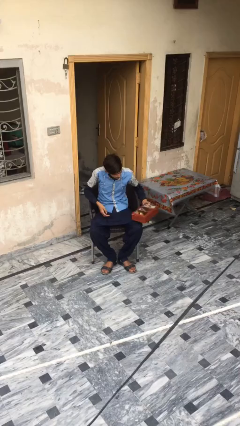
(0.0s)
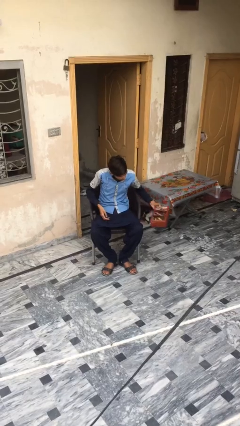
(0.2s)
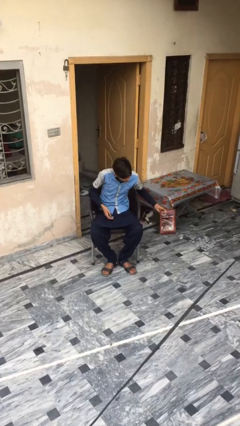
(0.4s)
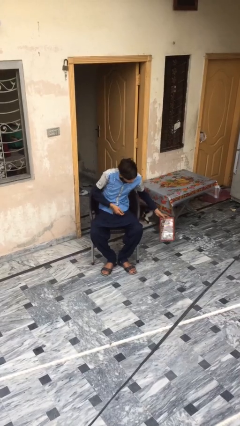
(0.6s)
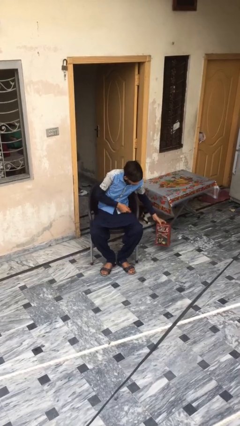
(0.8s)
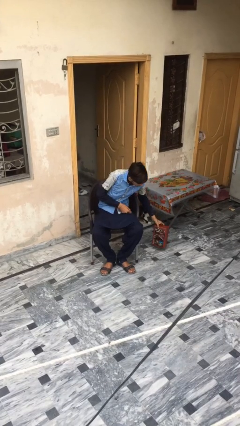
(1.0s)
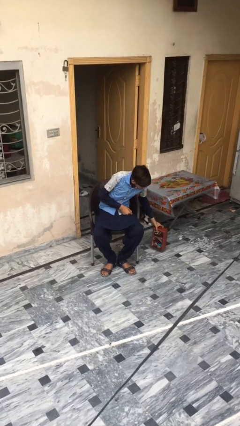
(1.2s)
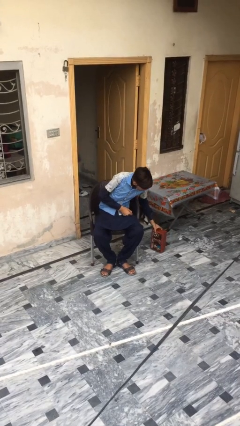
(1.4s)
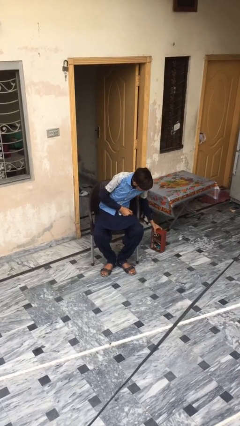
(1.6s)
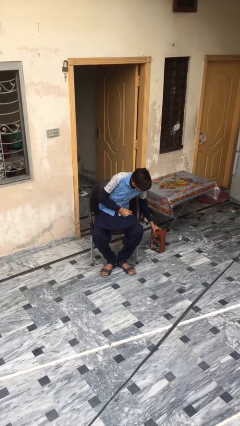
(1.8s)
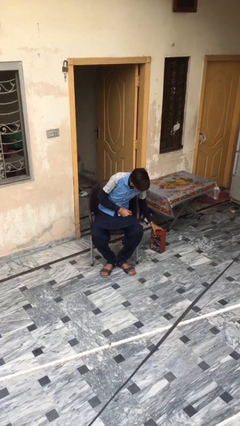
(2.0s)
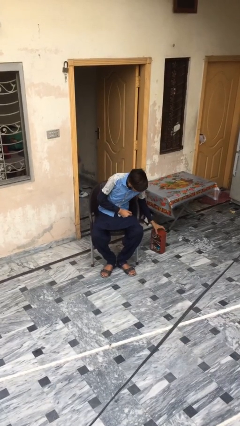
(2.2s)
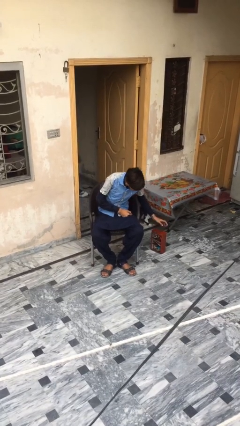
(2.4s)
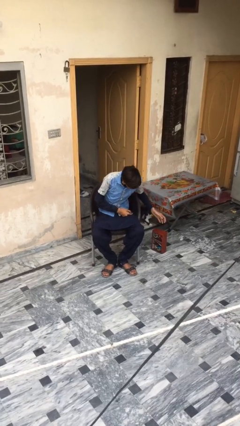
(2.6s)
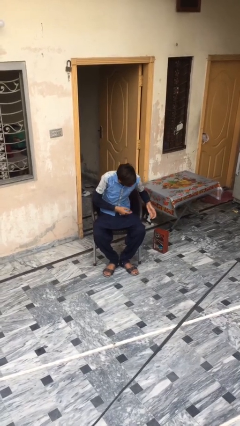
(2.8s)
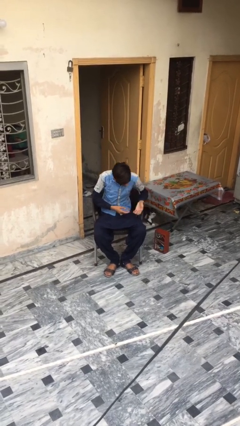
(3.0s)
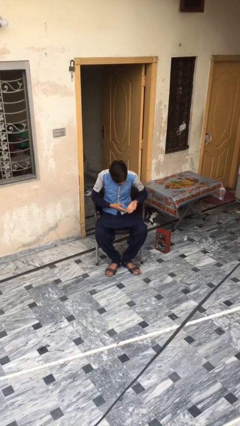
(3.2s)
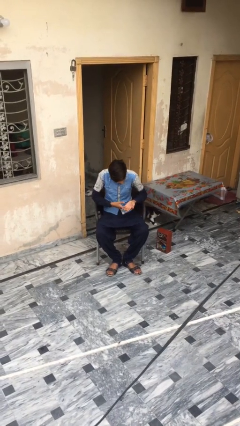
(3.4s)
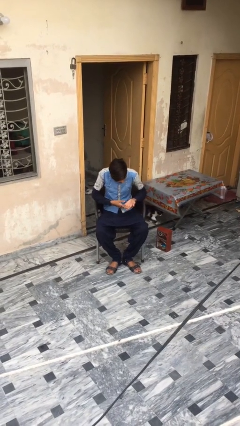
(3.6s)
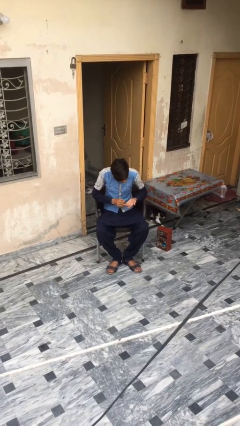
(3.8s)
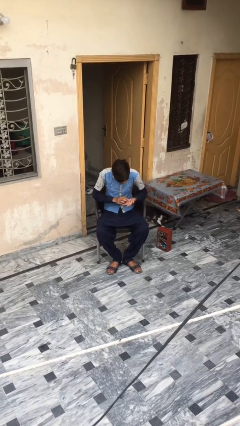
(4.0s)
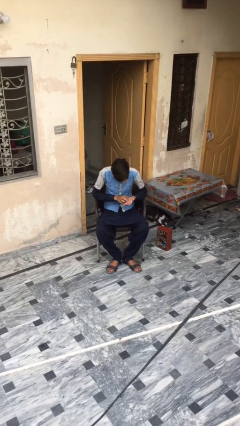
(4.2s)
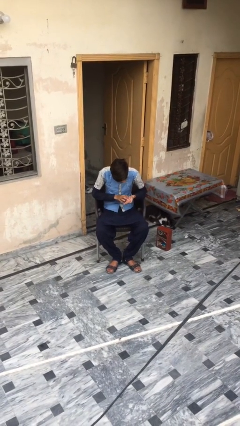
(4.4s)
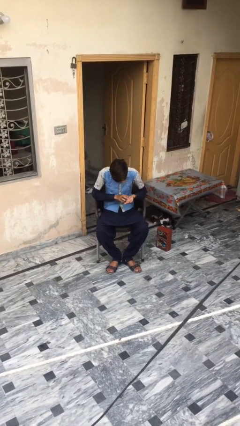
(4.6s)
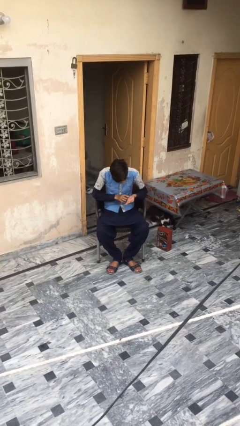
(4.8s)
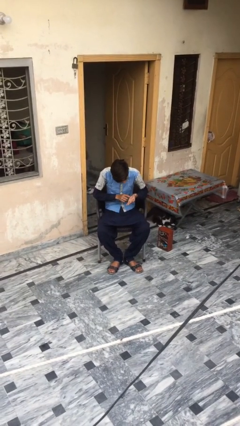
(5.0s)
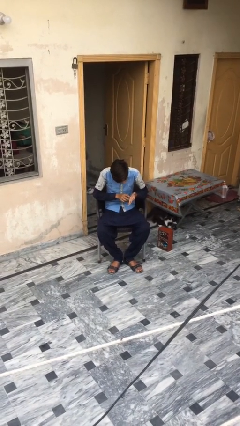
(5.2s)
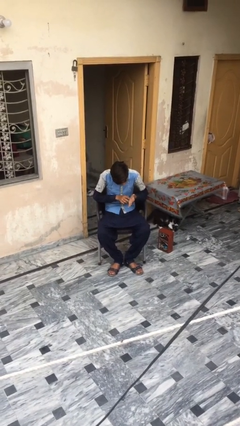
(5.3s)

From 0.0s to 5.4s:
person puts down object on floor

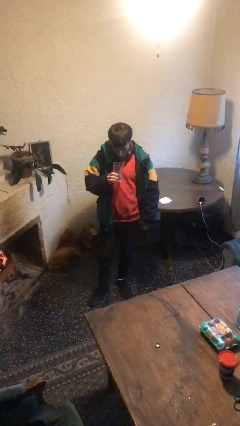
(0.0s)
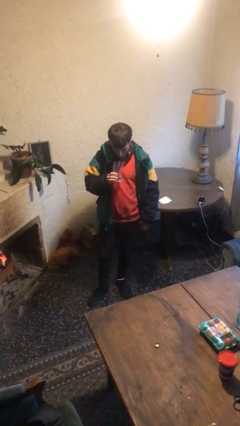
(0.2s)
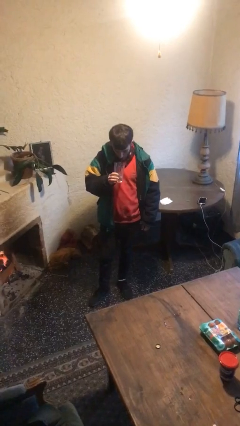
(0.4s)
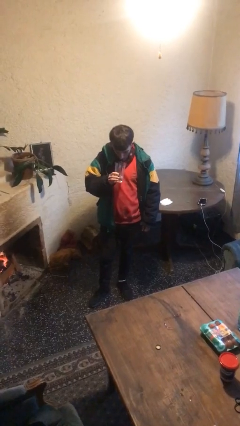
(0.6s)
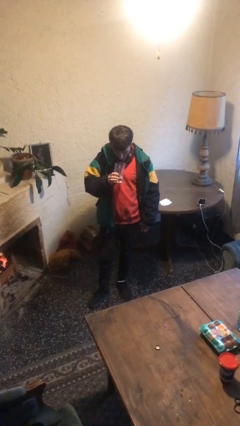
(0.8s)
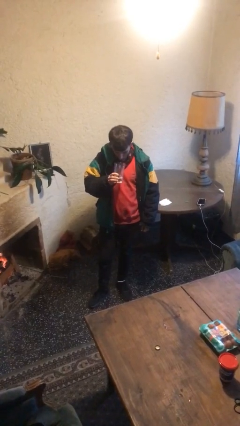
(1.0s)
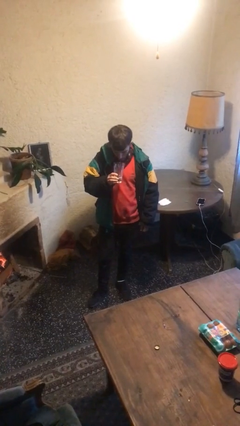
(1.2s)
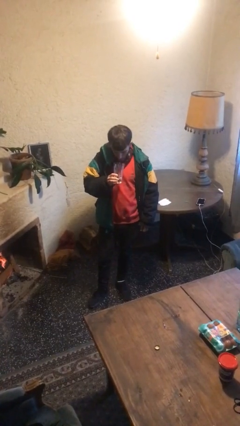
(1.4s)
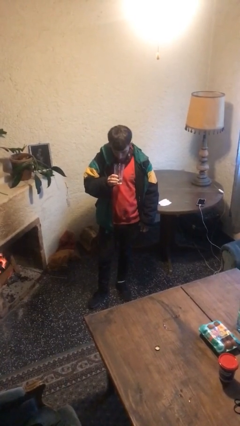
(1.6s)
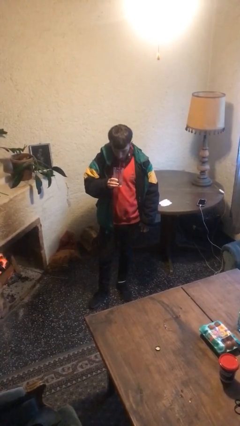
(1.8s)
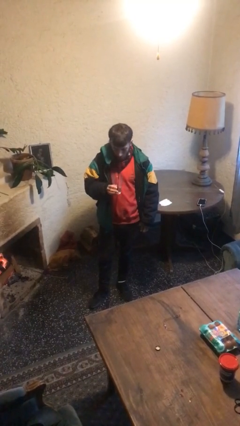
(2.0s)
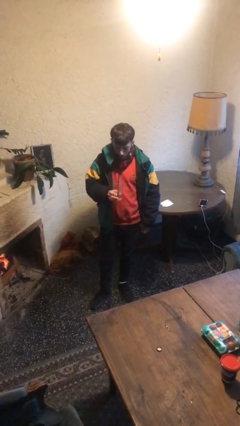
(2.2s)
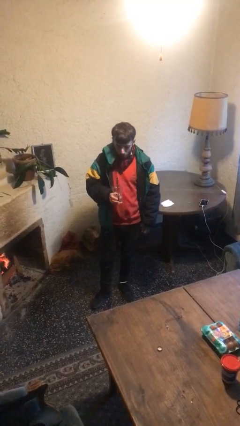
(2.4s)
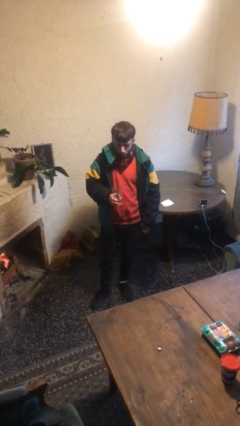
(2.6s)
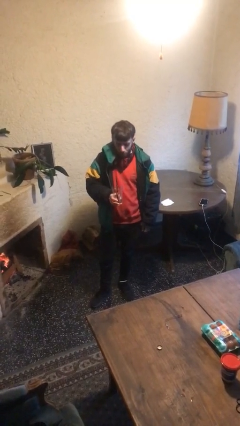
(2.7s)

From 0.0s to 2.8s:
person drinks from straw

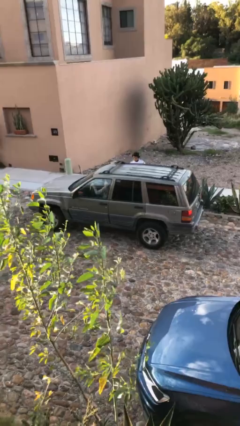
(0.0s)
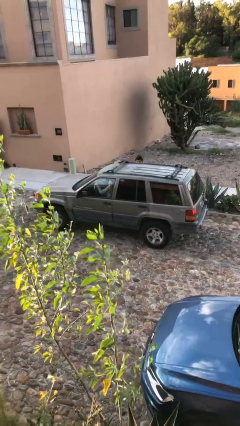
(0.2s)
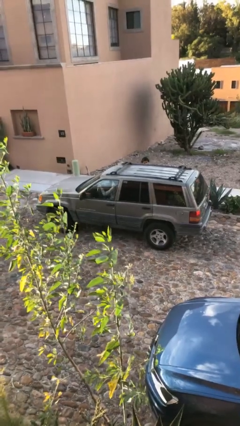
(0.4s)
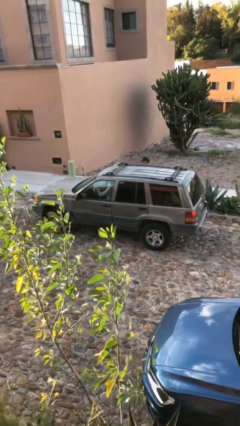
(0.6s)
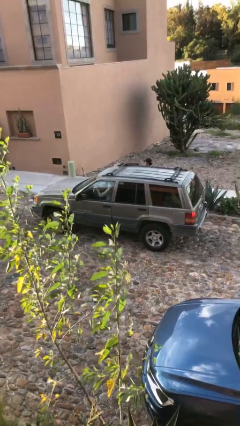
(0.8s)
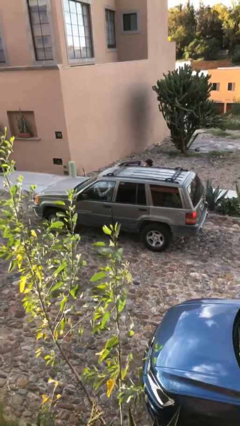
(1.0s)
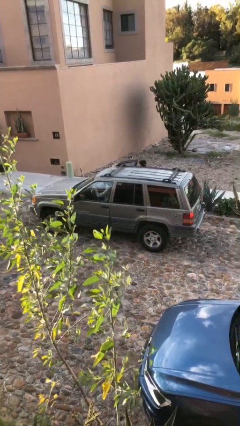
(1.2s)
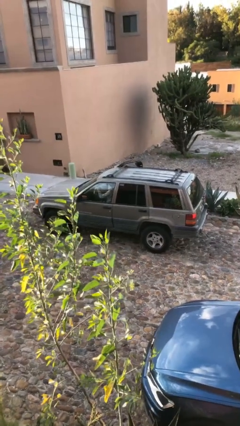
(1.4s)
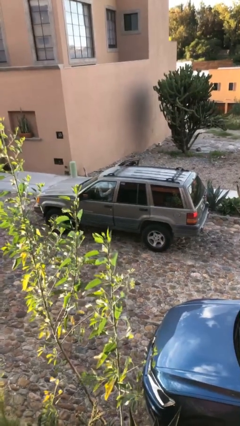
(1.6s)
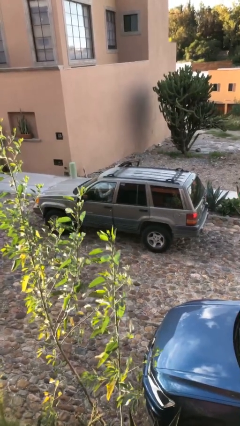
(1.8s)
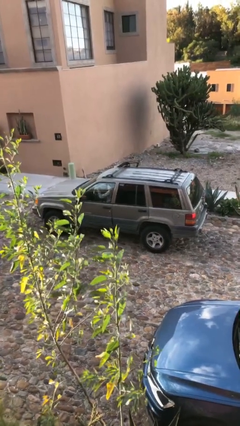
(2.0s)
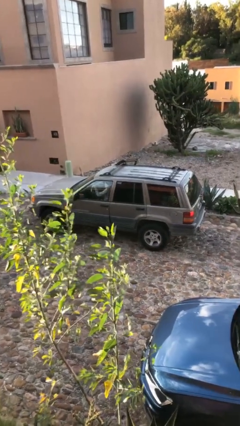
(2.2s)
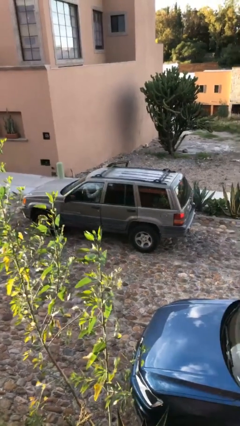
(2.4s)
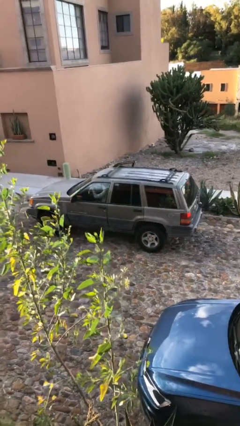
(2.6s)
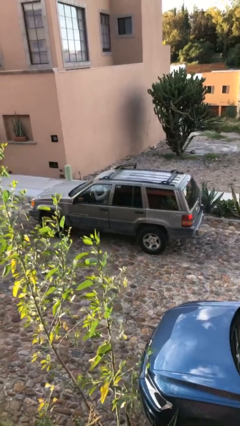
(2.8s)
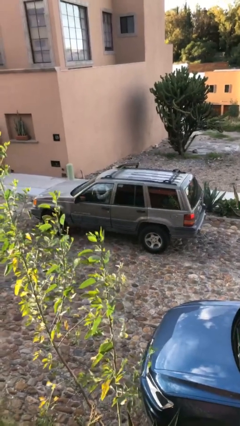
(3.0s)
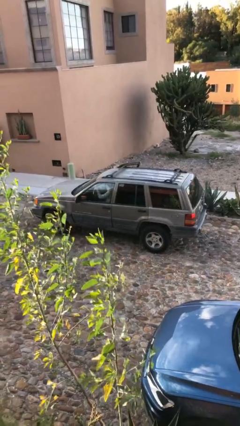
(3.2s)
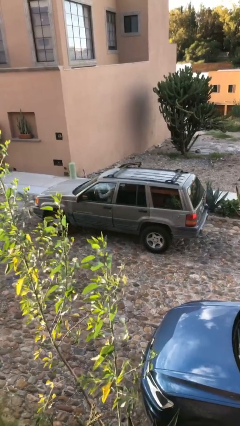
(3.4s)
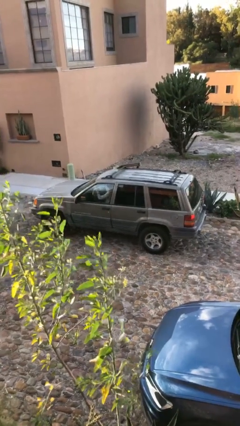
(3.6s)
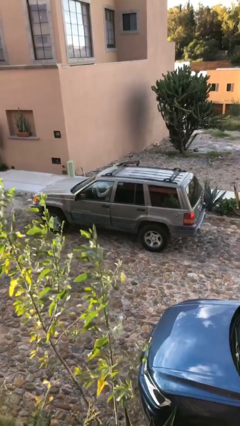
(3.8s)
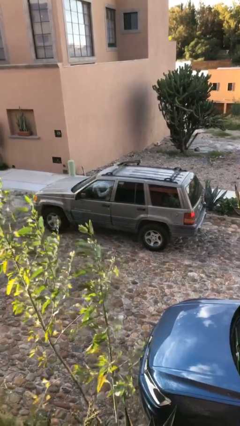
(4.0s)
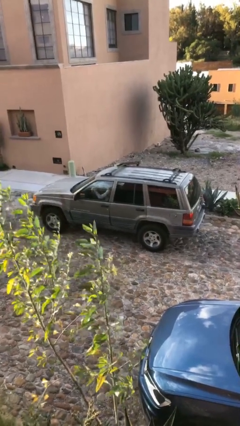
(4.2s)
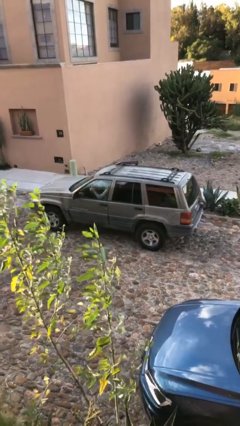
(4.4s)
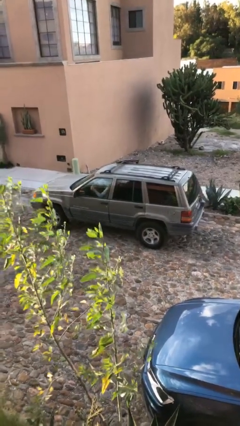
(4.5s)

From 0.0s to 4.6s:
car picks up person

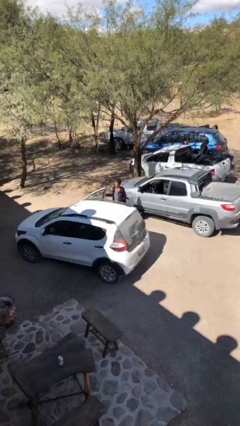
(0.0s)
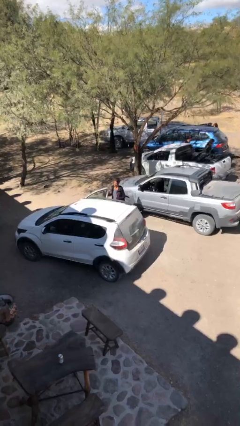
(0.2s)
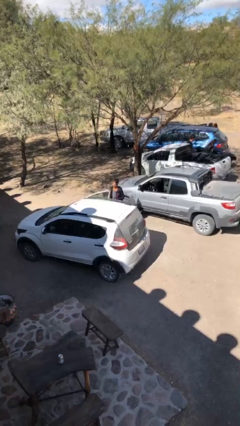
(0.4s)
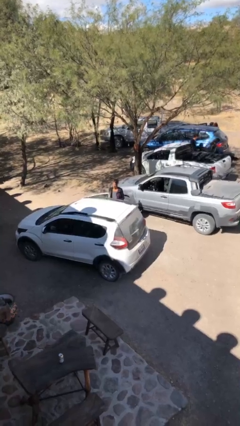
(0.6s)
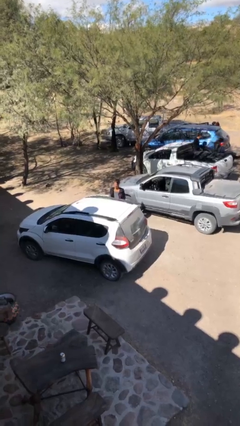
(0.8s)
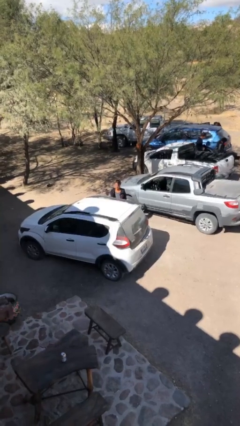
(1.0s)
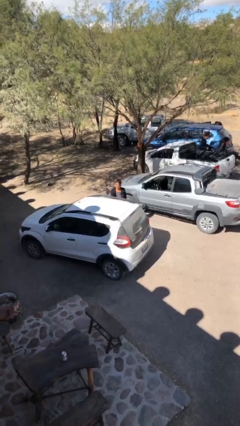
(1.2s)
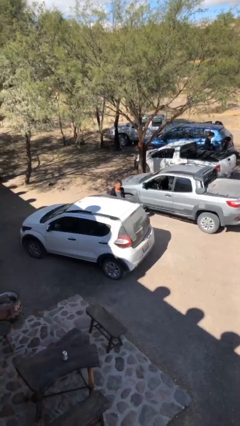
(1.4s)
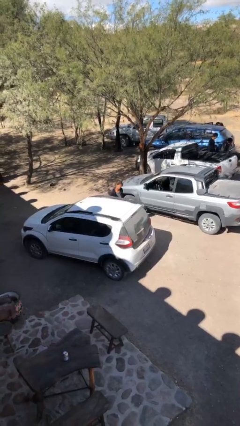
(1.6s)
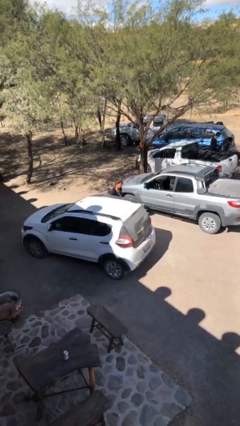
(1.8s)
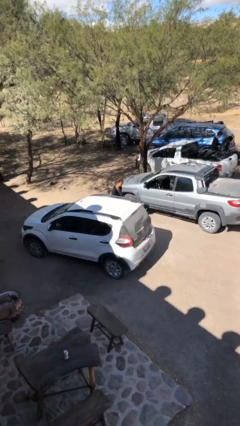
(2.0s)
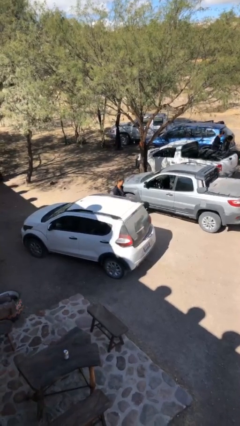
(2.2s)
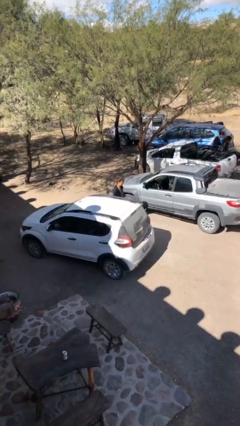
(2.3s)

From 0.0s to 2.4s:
person closes car door

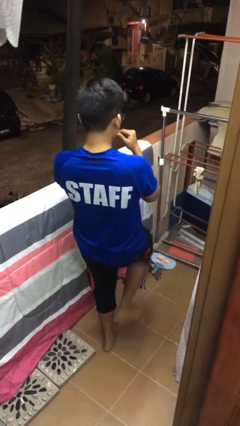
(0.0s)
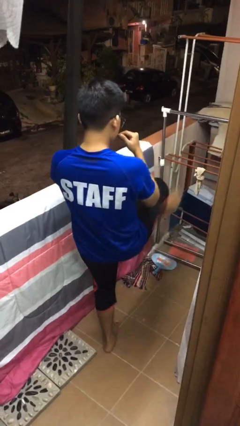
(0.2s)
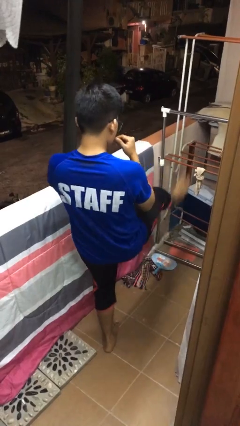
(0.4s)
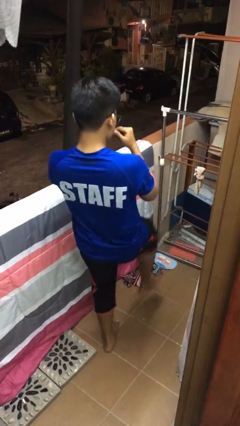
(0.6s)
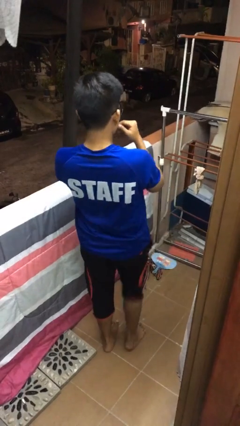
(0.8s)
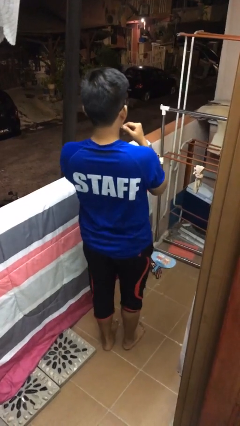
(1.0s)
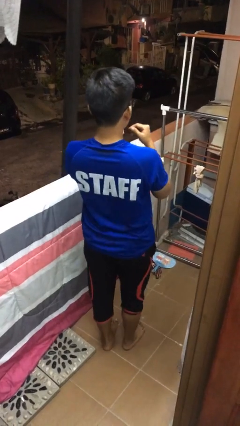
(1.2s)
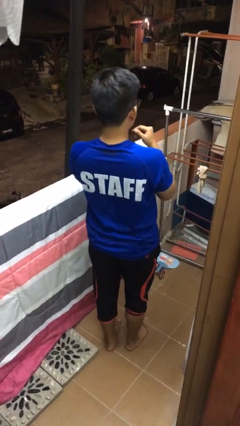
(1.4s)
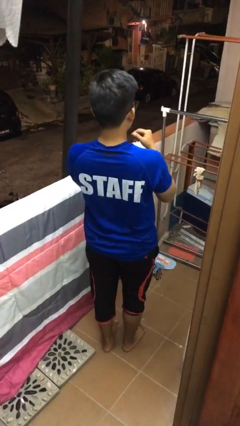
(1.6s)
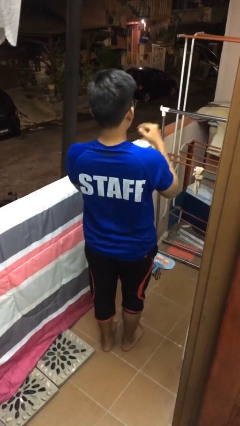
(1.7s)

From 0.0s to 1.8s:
person karate kicks

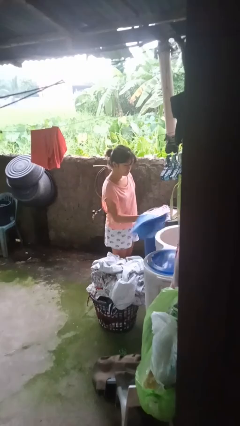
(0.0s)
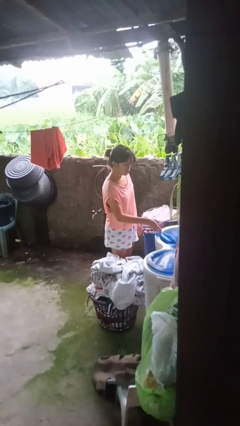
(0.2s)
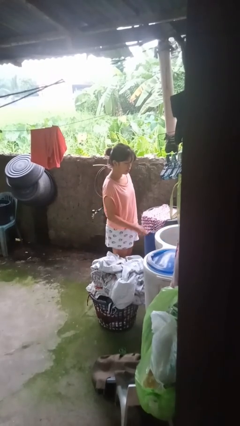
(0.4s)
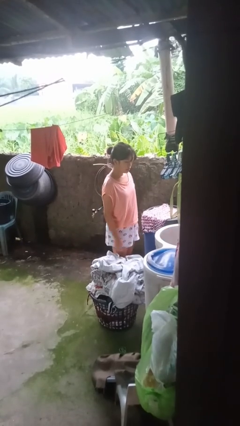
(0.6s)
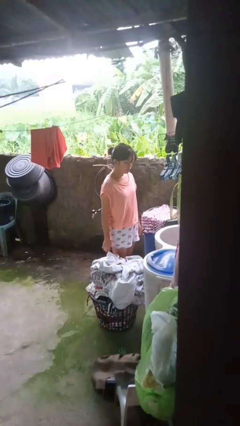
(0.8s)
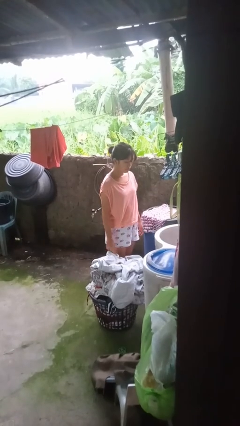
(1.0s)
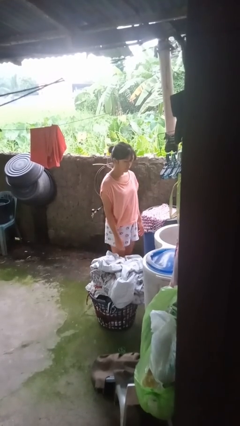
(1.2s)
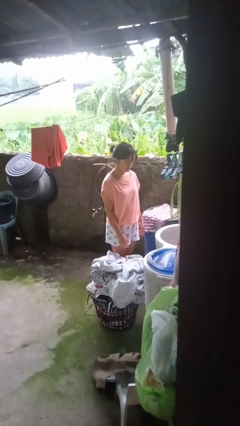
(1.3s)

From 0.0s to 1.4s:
person loads clotheswasher
